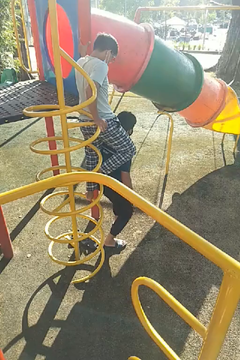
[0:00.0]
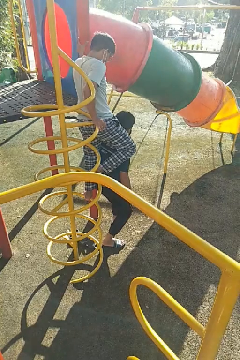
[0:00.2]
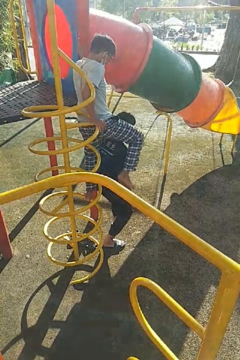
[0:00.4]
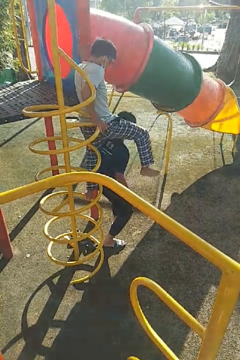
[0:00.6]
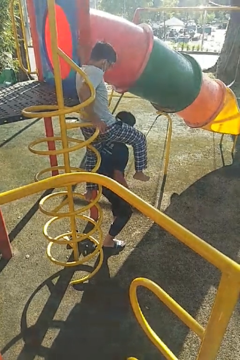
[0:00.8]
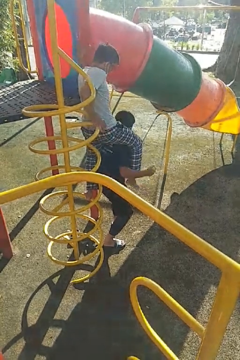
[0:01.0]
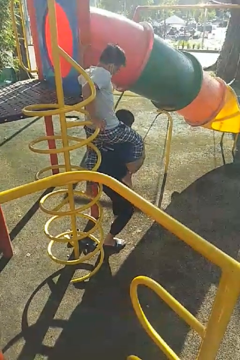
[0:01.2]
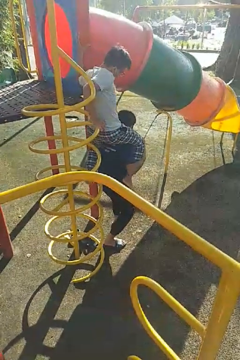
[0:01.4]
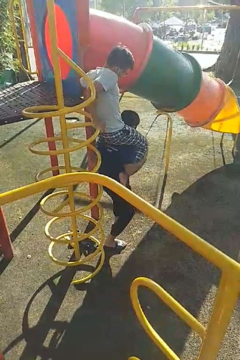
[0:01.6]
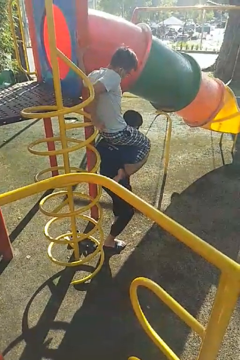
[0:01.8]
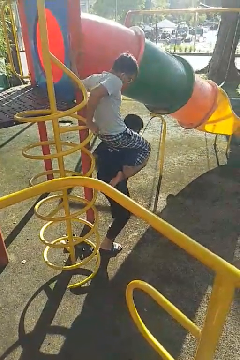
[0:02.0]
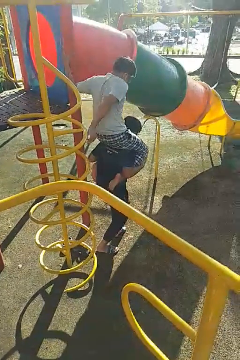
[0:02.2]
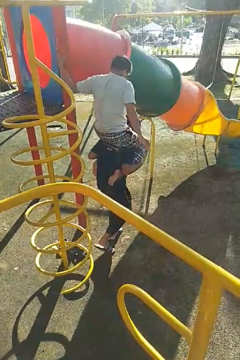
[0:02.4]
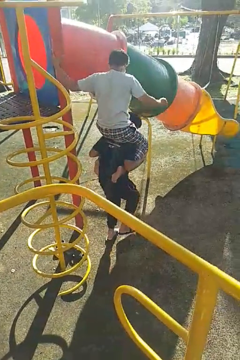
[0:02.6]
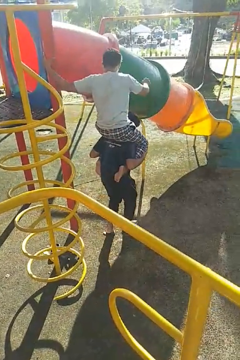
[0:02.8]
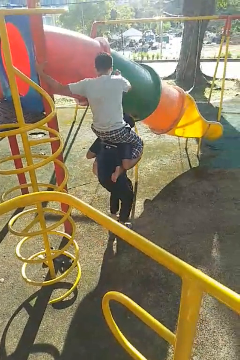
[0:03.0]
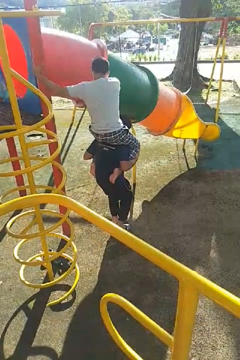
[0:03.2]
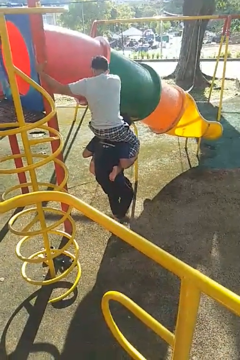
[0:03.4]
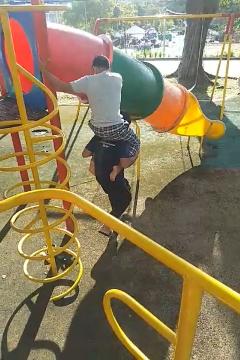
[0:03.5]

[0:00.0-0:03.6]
person carries person on shoulders

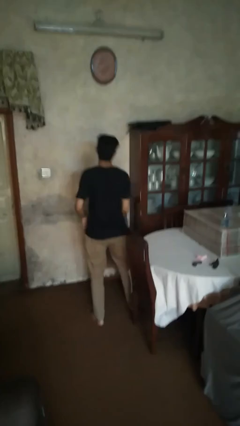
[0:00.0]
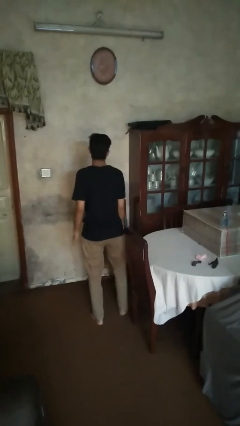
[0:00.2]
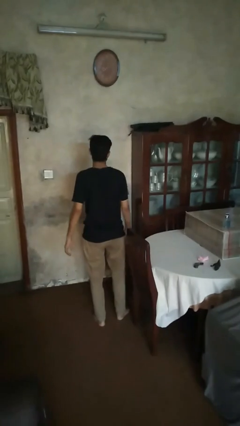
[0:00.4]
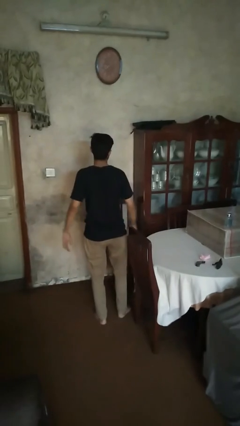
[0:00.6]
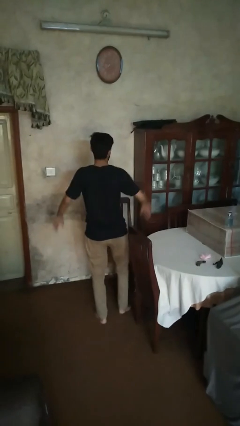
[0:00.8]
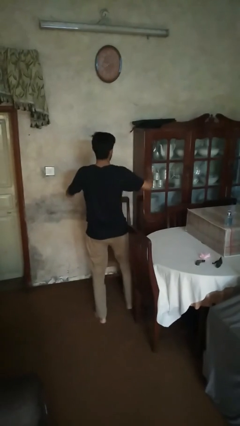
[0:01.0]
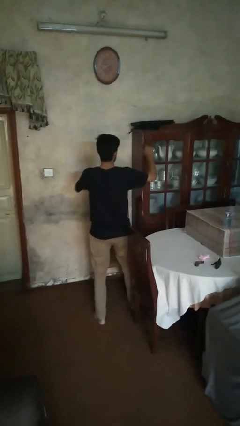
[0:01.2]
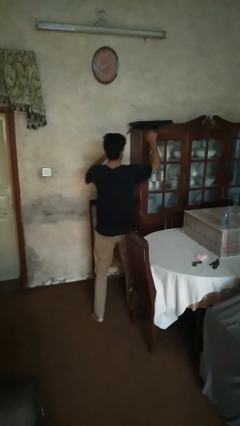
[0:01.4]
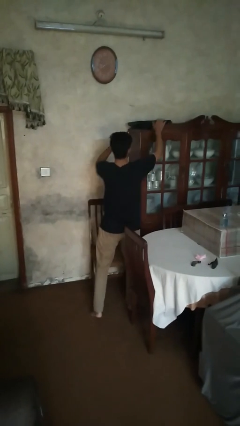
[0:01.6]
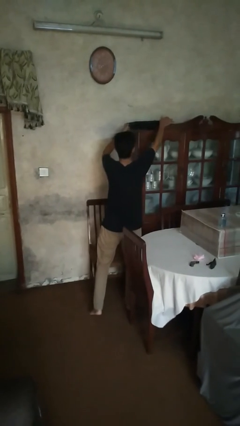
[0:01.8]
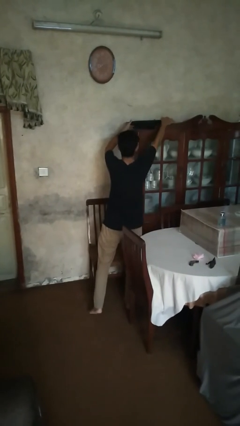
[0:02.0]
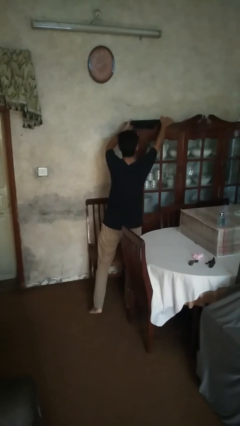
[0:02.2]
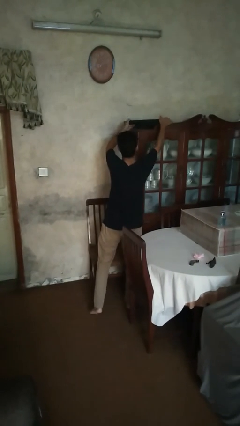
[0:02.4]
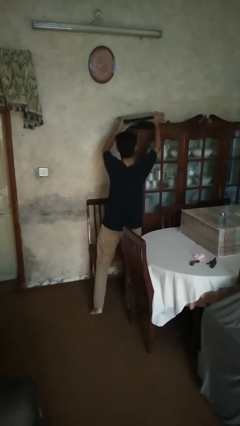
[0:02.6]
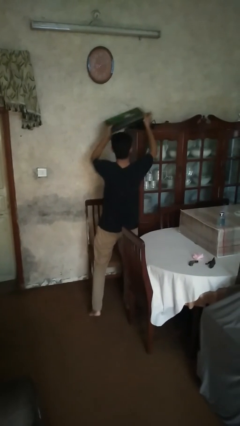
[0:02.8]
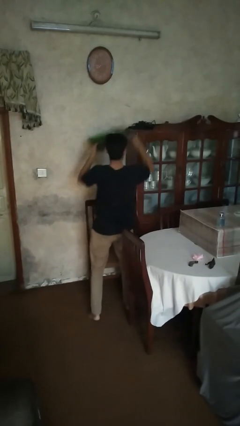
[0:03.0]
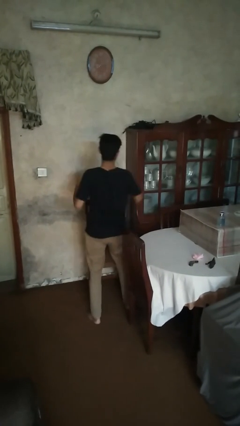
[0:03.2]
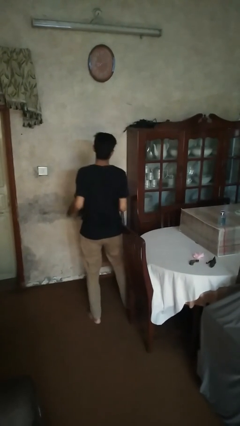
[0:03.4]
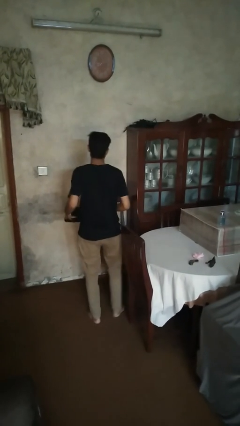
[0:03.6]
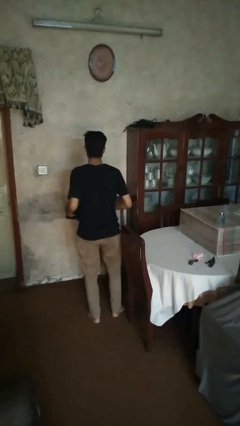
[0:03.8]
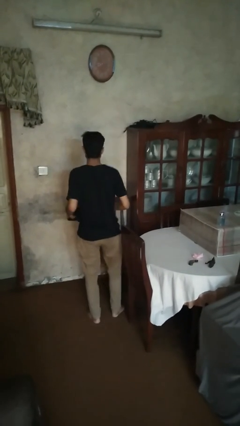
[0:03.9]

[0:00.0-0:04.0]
person picks up object from cabinet

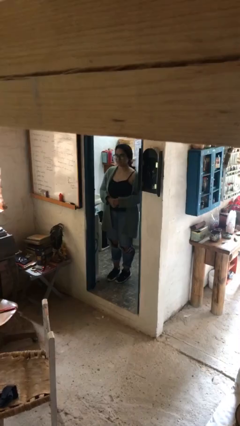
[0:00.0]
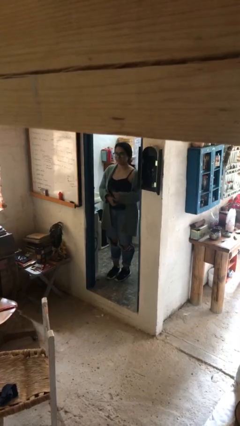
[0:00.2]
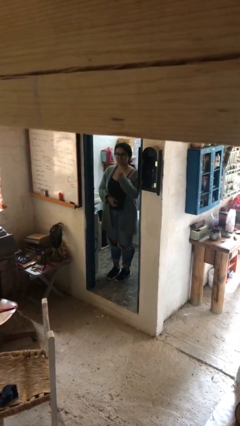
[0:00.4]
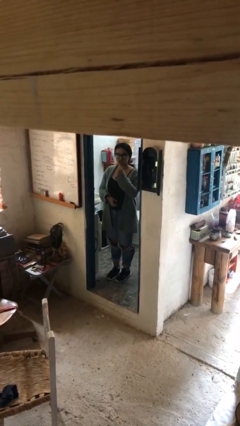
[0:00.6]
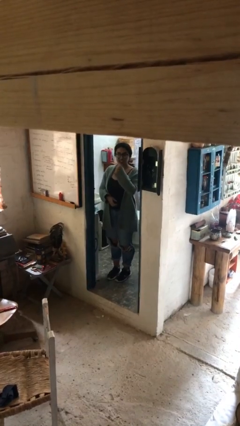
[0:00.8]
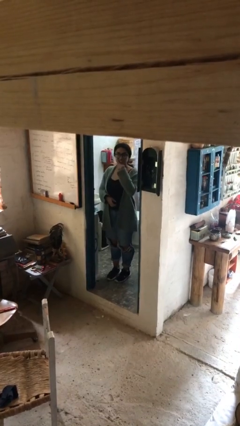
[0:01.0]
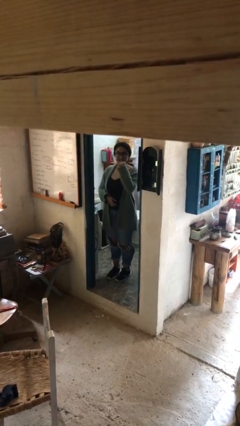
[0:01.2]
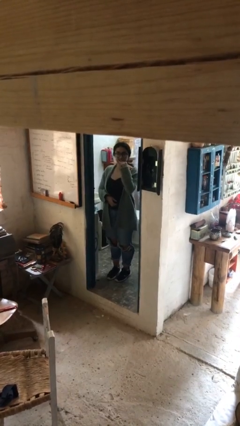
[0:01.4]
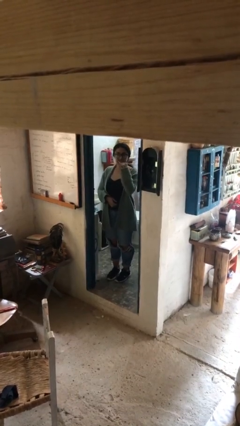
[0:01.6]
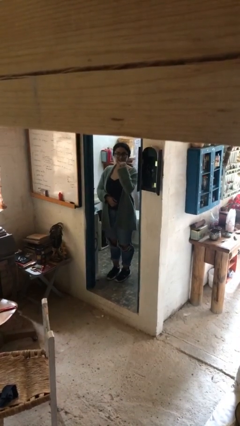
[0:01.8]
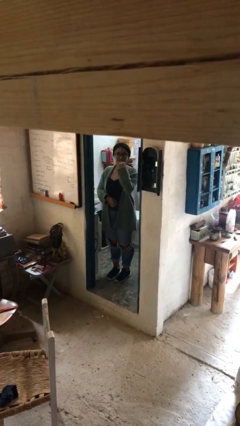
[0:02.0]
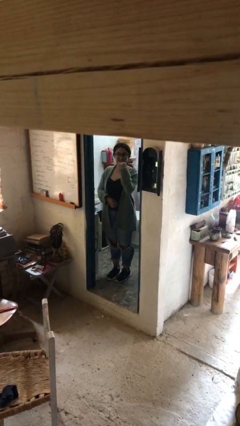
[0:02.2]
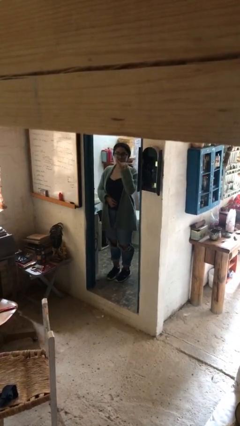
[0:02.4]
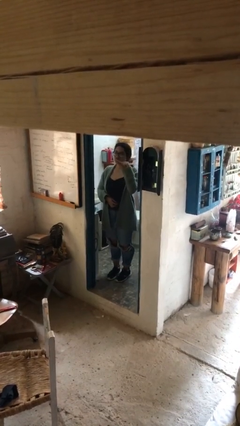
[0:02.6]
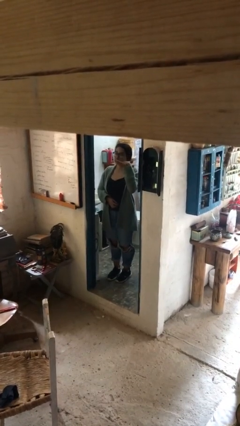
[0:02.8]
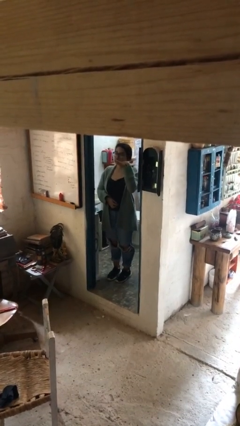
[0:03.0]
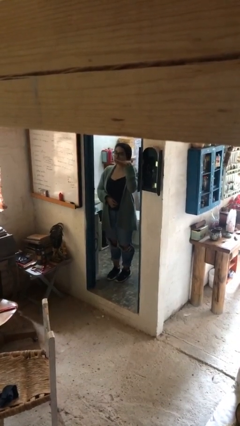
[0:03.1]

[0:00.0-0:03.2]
person brushes teeth

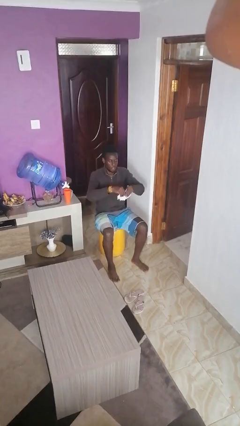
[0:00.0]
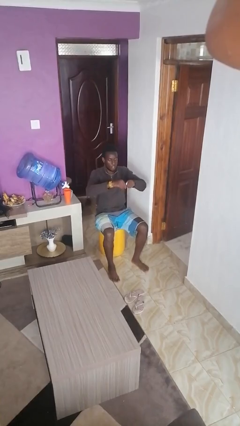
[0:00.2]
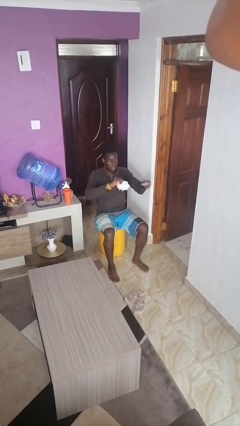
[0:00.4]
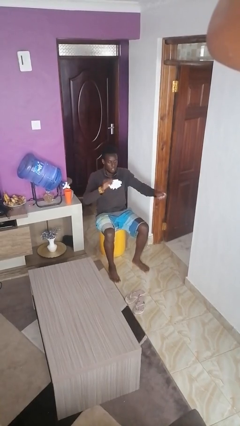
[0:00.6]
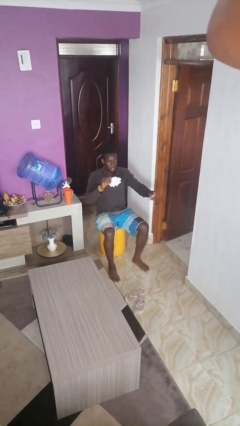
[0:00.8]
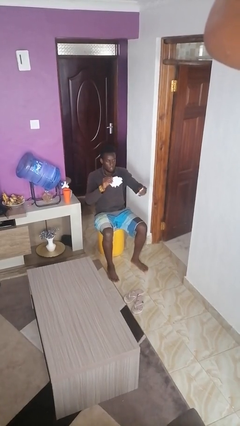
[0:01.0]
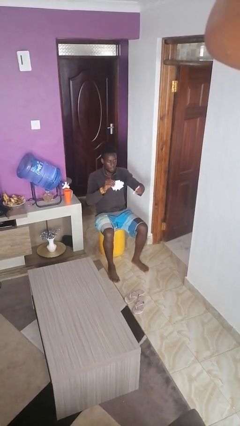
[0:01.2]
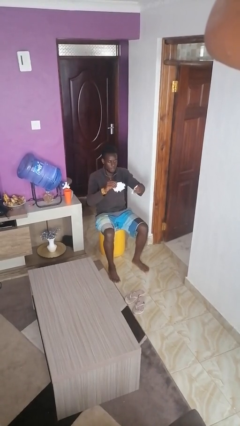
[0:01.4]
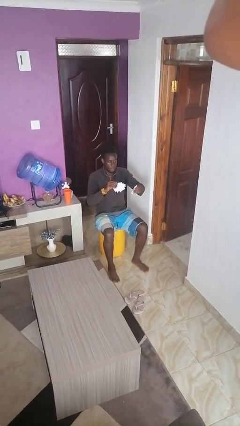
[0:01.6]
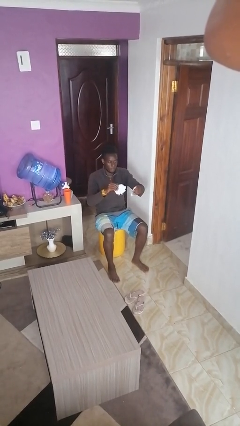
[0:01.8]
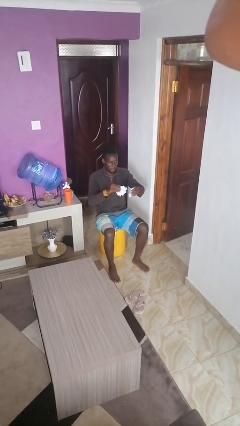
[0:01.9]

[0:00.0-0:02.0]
person tears paper

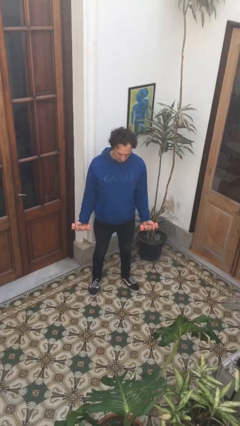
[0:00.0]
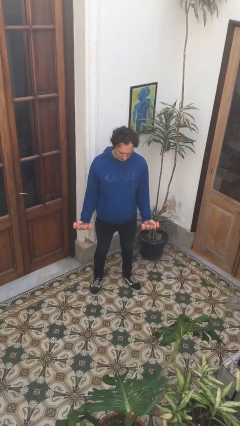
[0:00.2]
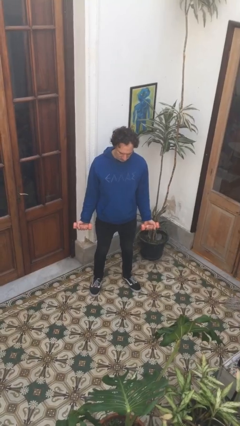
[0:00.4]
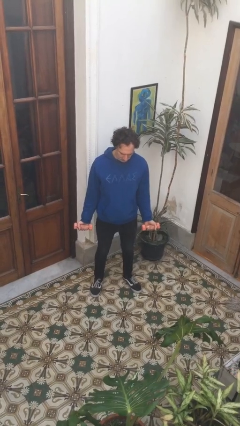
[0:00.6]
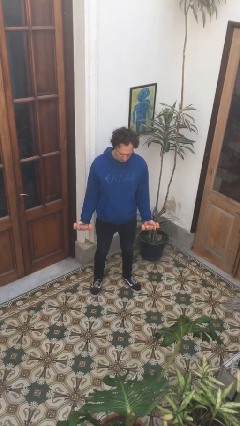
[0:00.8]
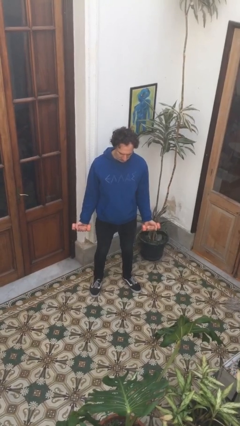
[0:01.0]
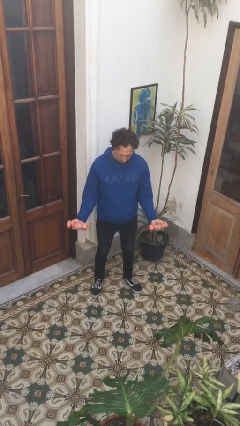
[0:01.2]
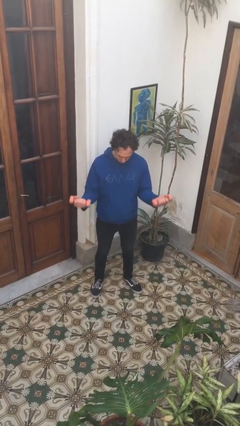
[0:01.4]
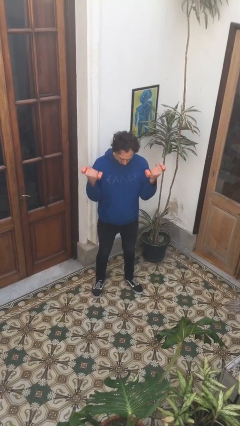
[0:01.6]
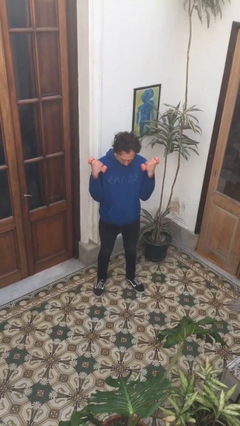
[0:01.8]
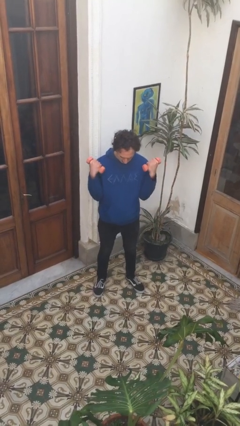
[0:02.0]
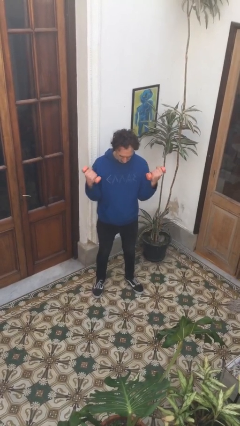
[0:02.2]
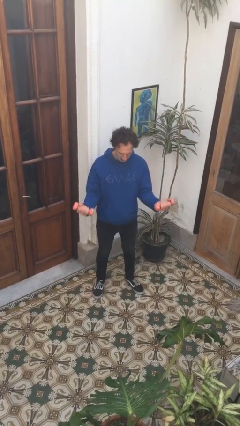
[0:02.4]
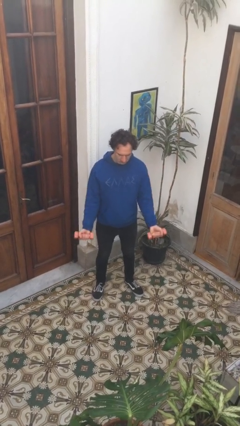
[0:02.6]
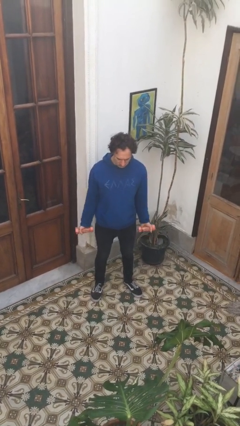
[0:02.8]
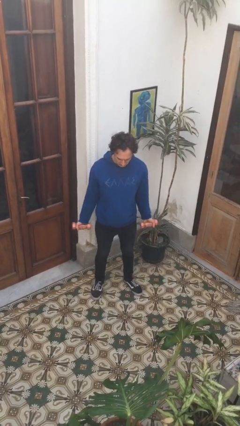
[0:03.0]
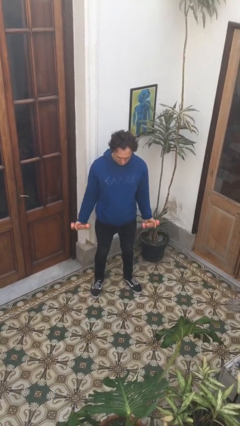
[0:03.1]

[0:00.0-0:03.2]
person lifts dumbbells

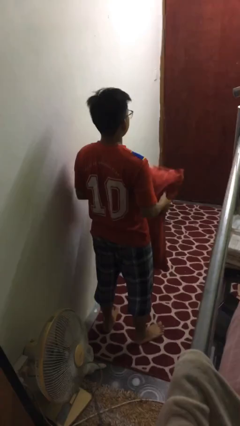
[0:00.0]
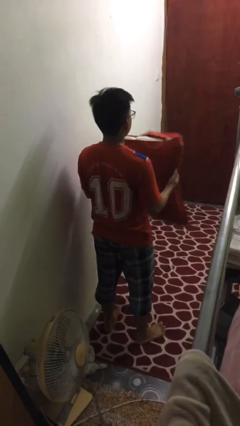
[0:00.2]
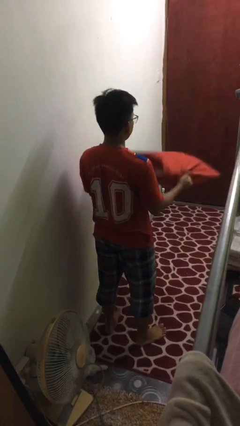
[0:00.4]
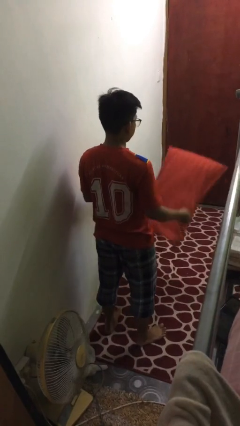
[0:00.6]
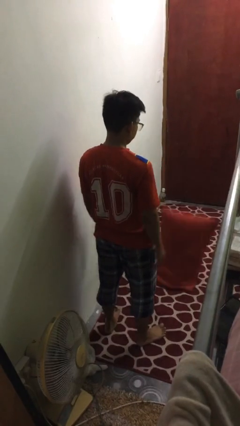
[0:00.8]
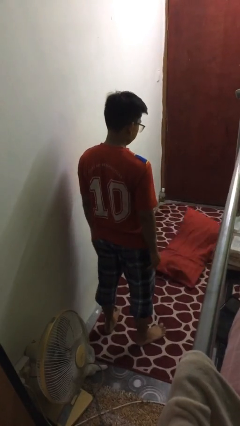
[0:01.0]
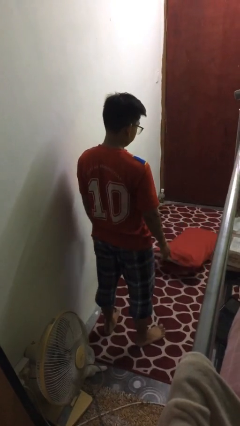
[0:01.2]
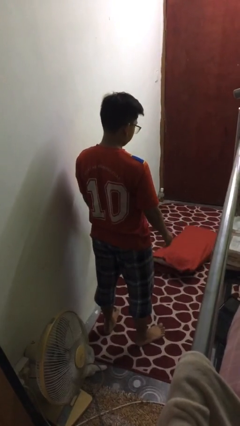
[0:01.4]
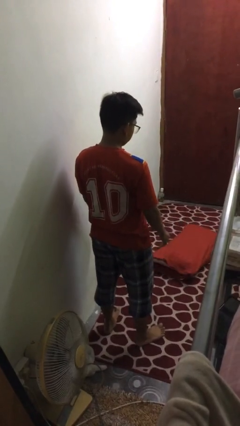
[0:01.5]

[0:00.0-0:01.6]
person drops object

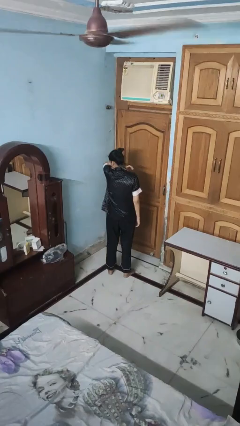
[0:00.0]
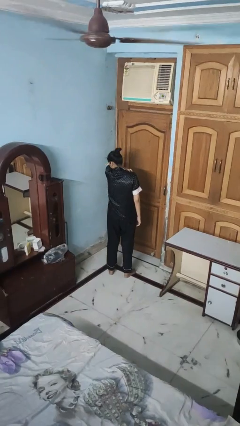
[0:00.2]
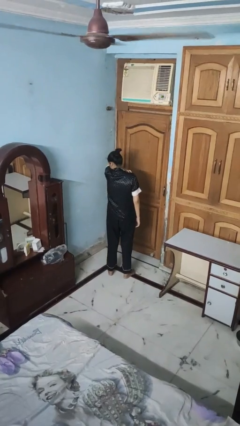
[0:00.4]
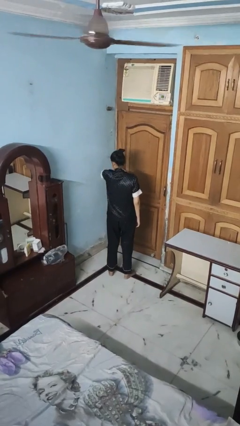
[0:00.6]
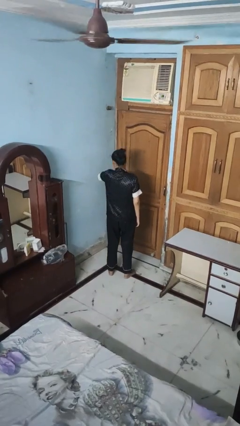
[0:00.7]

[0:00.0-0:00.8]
person sneezes into arm
